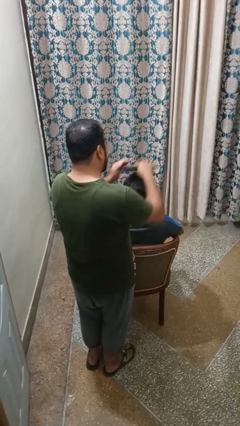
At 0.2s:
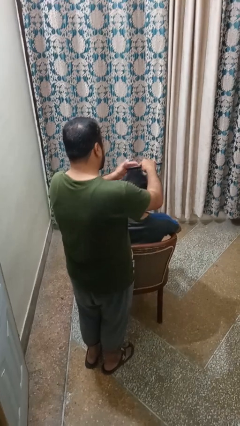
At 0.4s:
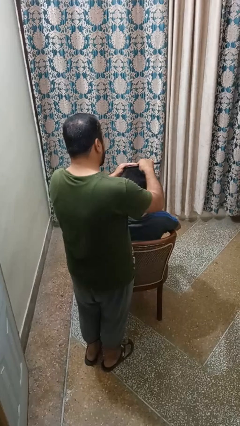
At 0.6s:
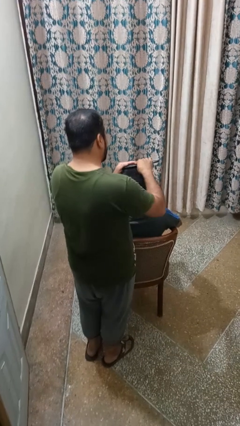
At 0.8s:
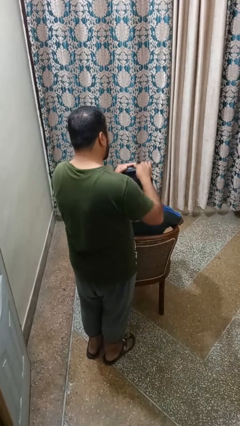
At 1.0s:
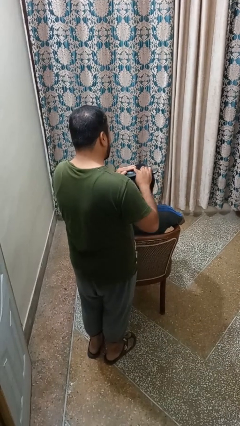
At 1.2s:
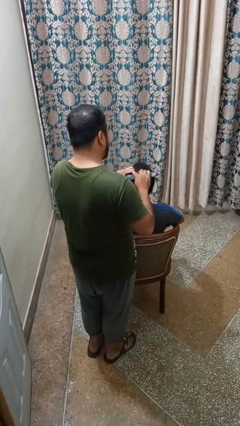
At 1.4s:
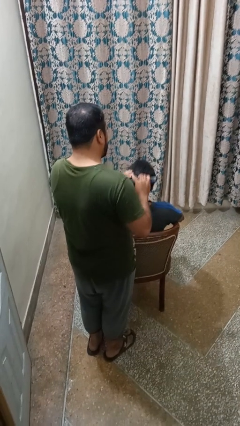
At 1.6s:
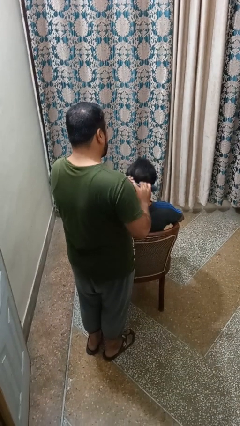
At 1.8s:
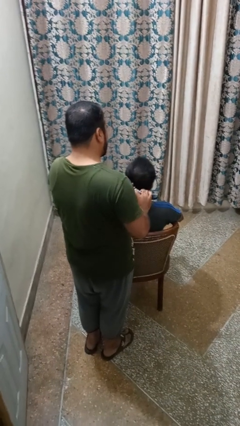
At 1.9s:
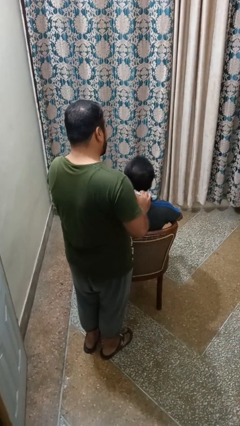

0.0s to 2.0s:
person brushes hair of person

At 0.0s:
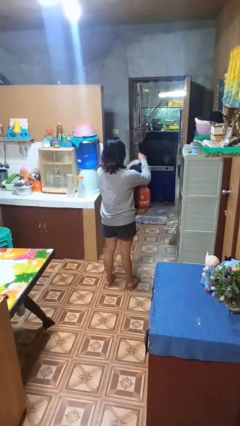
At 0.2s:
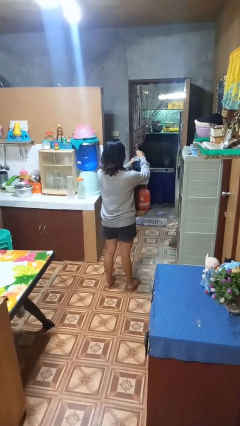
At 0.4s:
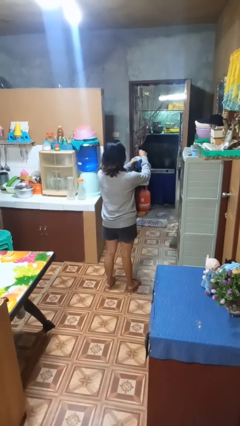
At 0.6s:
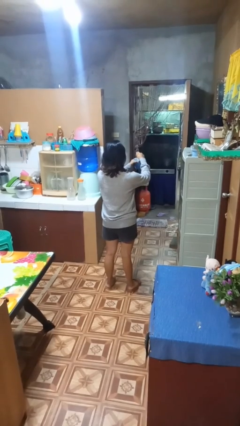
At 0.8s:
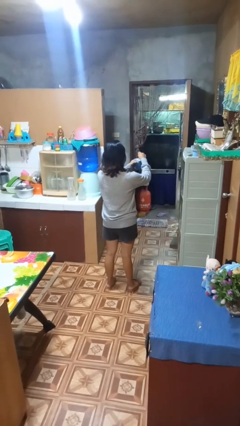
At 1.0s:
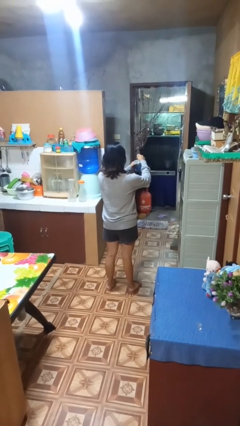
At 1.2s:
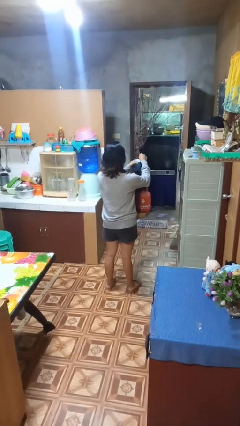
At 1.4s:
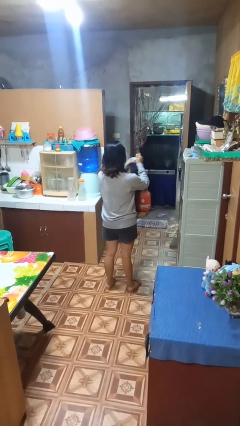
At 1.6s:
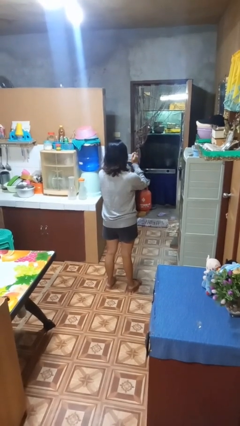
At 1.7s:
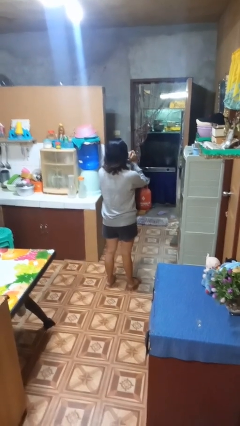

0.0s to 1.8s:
person stirs mug

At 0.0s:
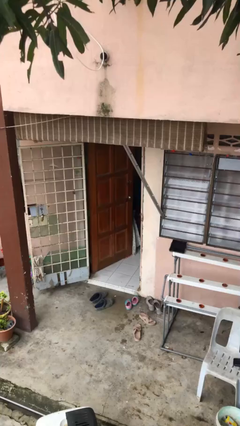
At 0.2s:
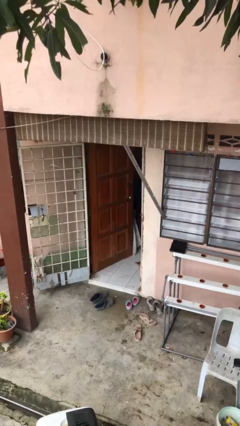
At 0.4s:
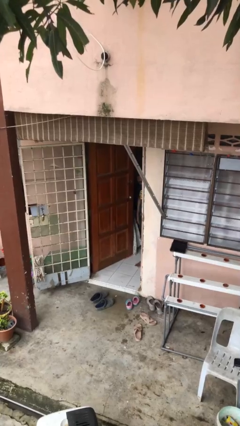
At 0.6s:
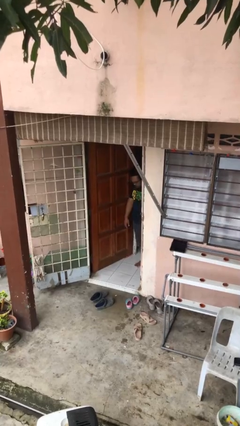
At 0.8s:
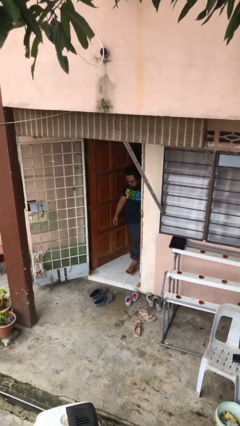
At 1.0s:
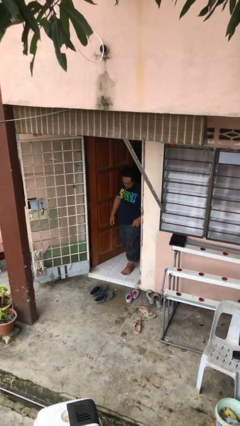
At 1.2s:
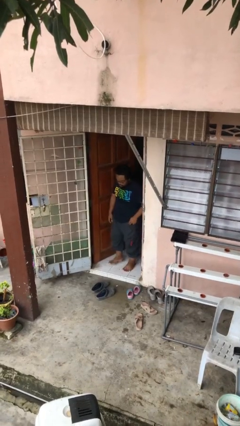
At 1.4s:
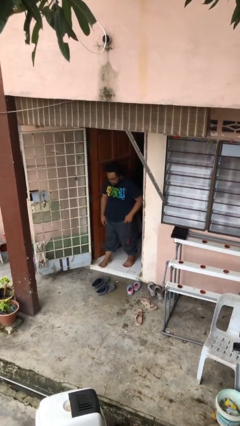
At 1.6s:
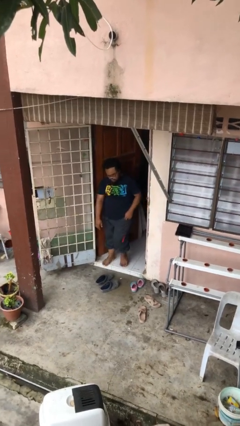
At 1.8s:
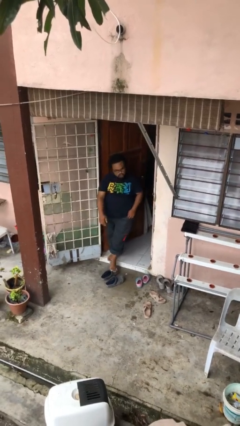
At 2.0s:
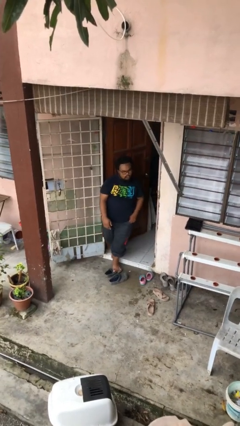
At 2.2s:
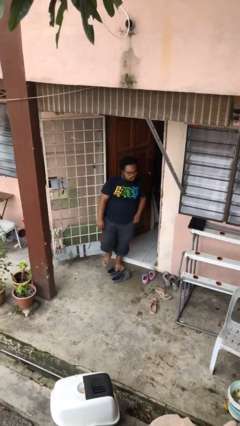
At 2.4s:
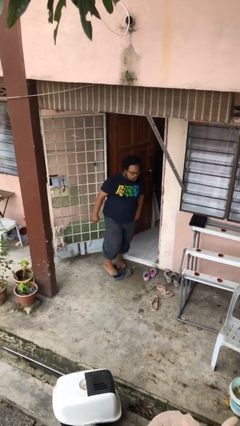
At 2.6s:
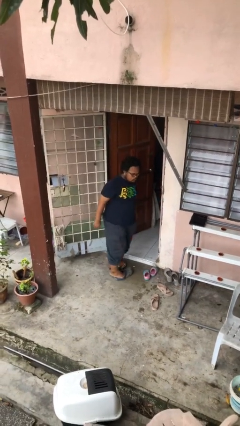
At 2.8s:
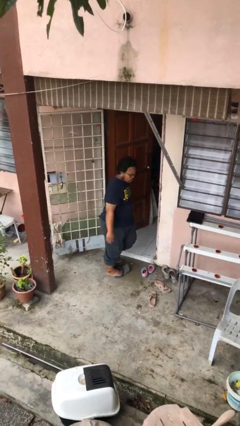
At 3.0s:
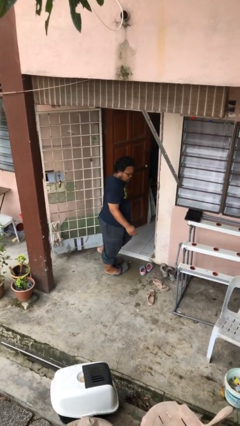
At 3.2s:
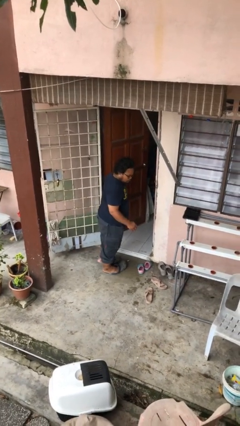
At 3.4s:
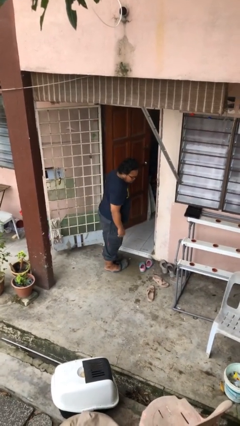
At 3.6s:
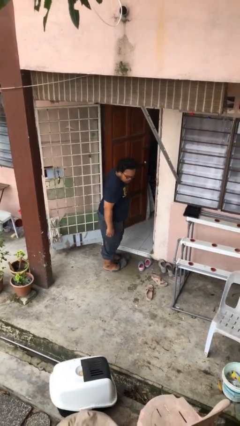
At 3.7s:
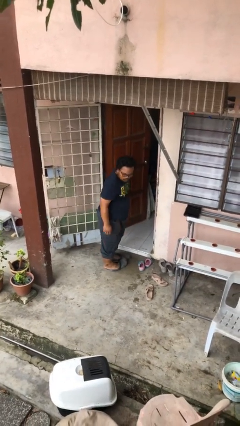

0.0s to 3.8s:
person enters scene through structure

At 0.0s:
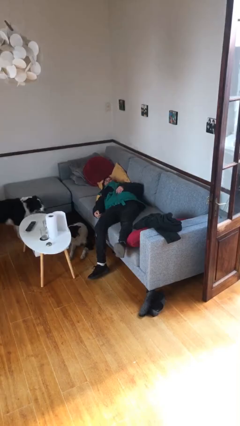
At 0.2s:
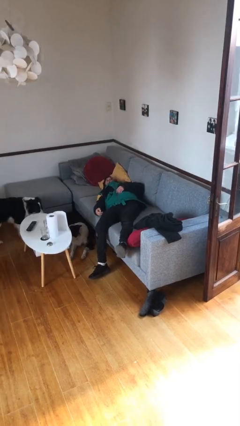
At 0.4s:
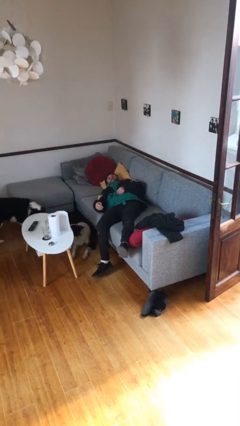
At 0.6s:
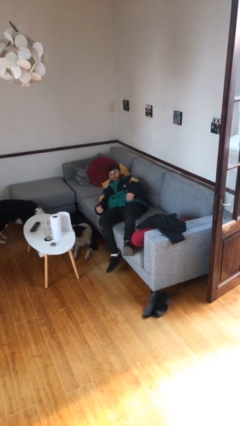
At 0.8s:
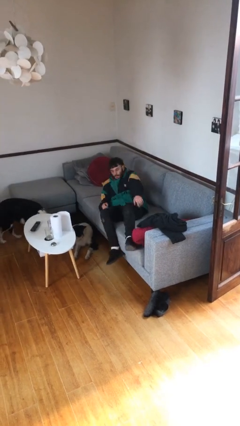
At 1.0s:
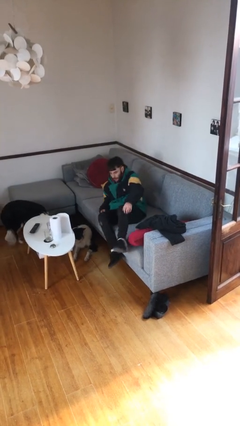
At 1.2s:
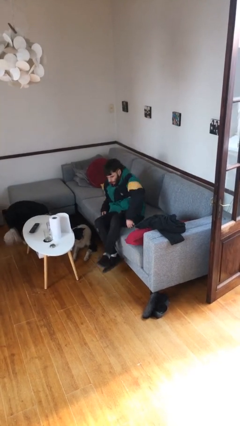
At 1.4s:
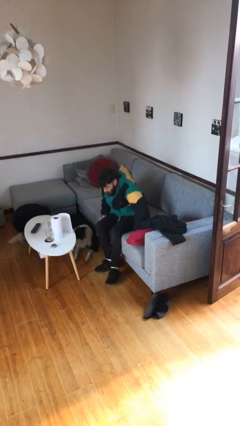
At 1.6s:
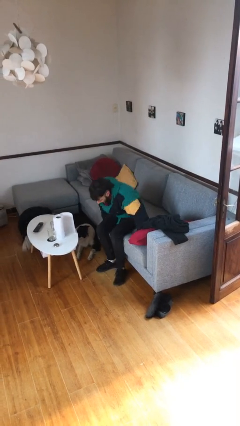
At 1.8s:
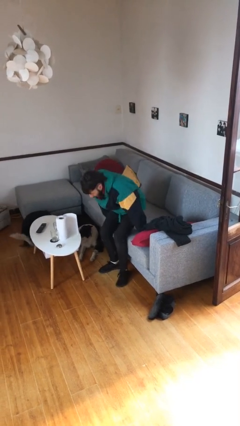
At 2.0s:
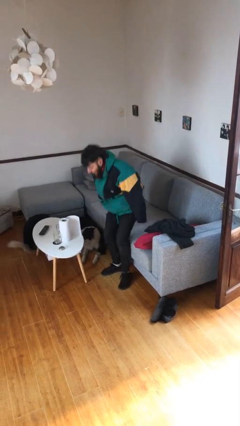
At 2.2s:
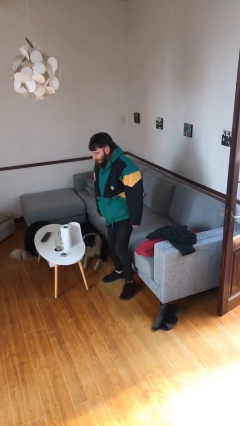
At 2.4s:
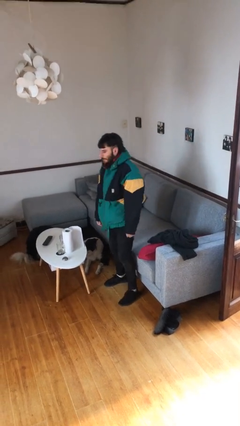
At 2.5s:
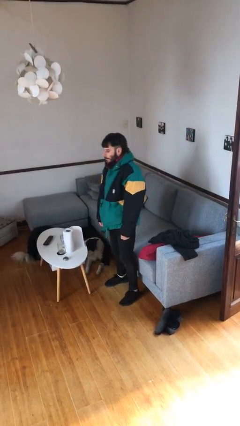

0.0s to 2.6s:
person stands up

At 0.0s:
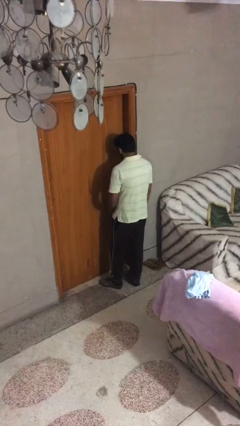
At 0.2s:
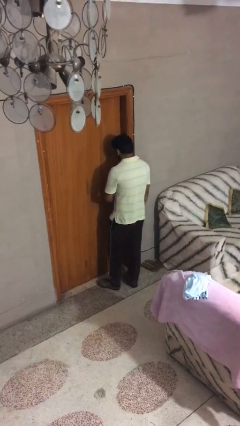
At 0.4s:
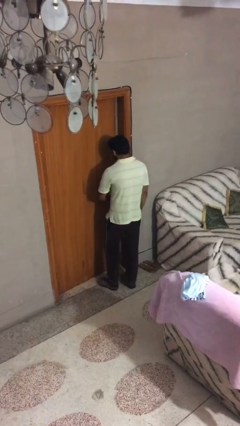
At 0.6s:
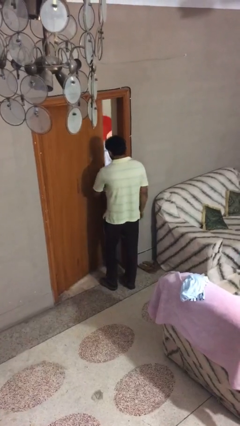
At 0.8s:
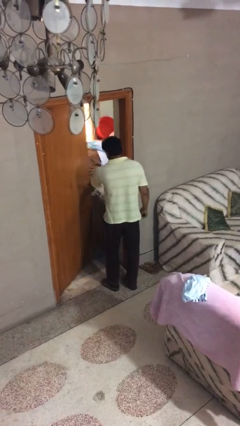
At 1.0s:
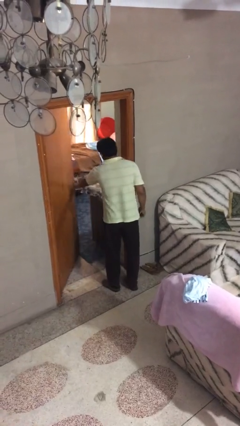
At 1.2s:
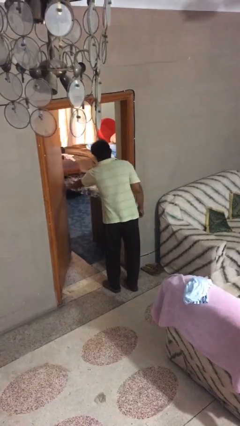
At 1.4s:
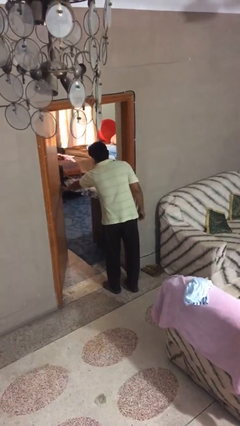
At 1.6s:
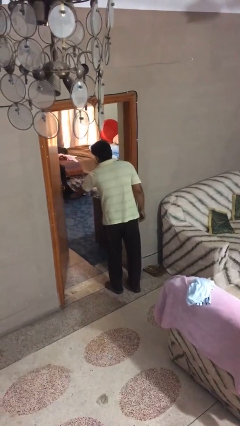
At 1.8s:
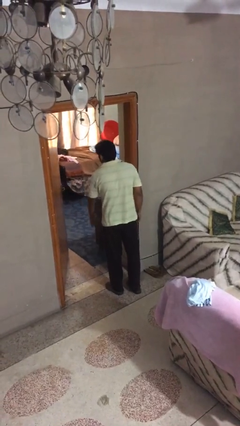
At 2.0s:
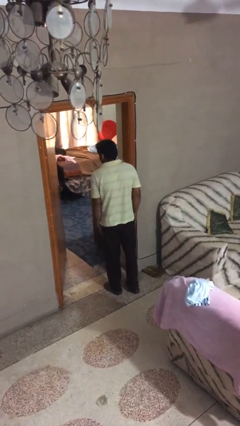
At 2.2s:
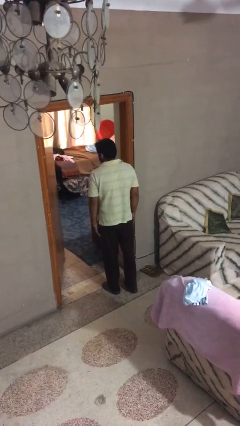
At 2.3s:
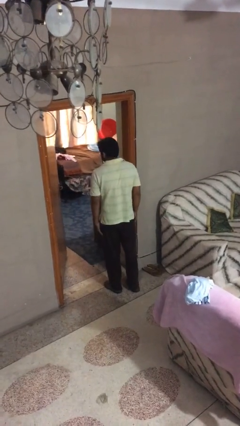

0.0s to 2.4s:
person opens facility door

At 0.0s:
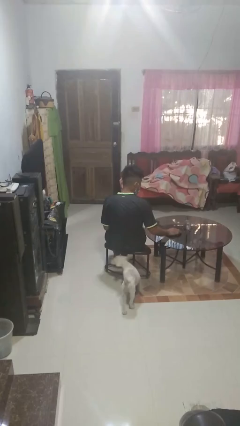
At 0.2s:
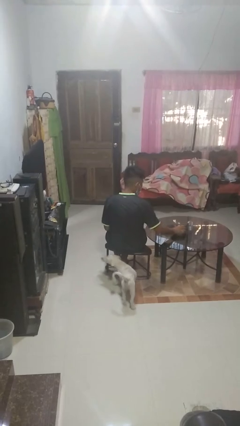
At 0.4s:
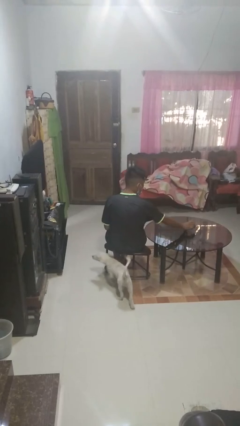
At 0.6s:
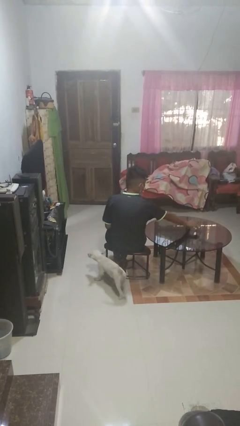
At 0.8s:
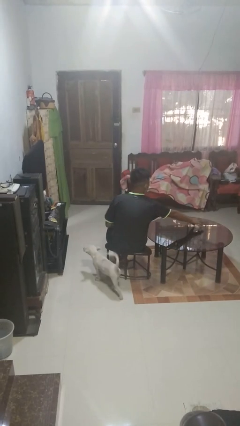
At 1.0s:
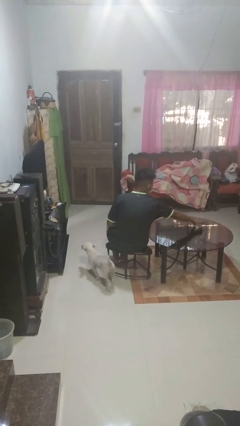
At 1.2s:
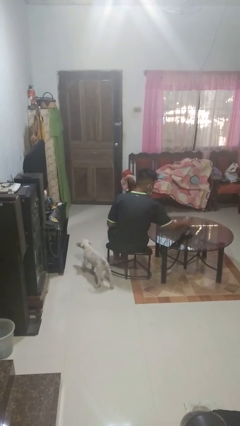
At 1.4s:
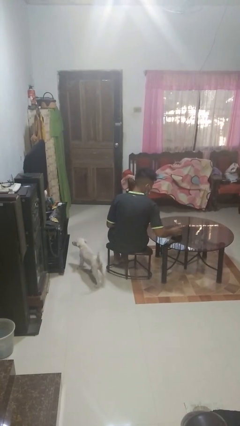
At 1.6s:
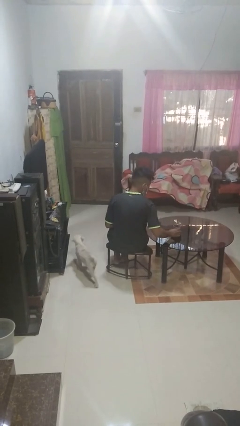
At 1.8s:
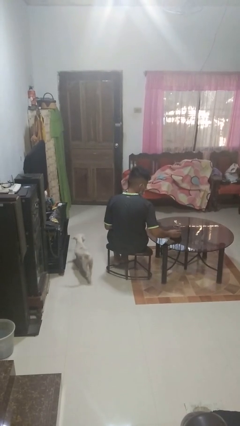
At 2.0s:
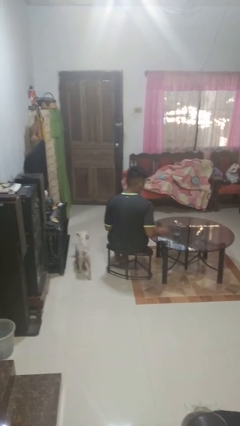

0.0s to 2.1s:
person sets upright glass

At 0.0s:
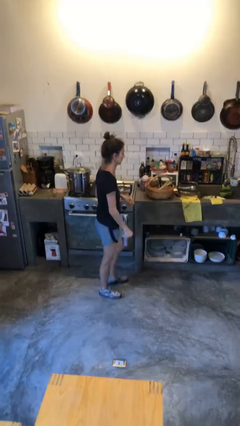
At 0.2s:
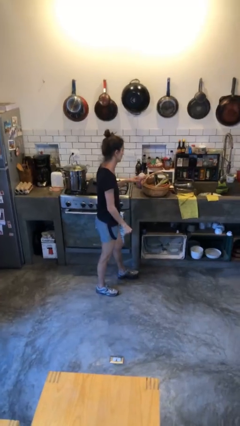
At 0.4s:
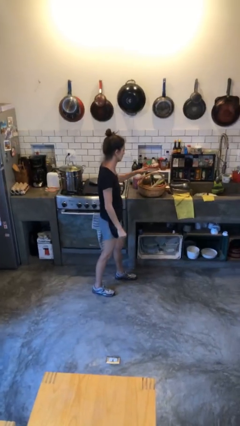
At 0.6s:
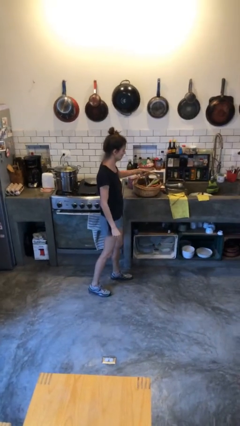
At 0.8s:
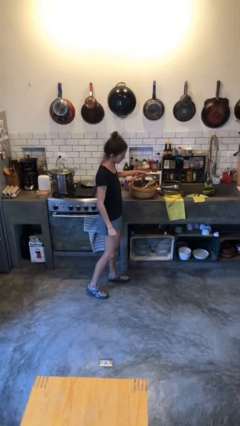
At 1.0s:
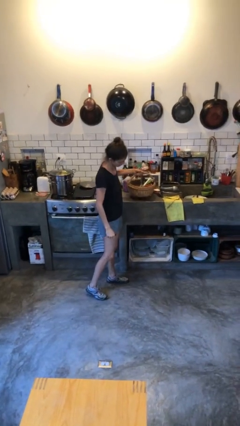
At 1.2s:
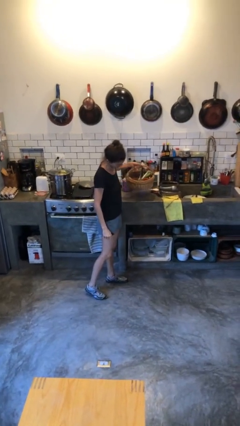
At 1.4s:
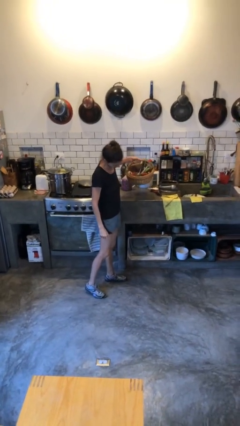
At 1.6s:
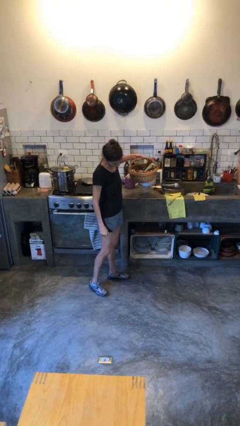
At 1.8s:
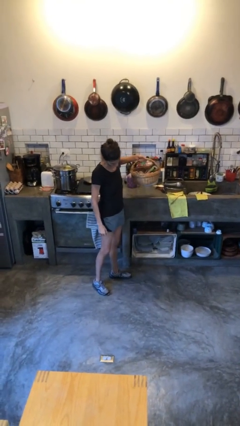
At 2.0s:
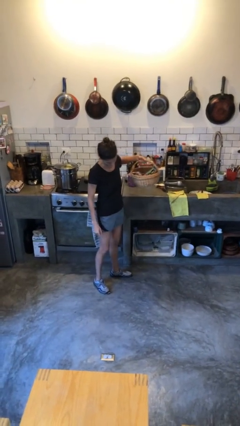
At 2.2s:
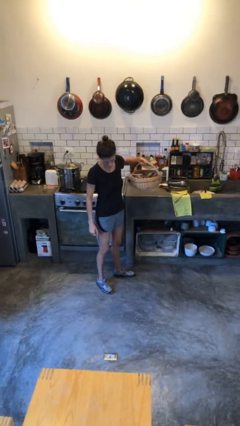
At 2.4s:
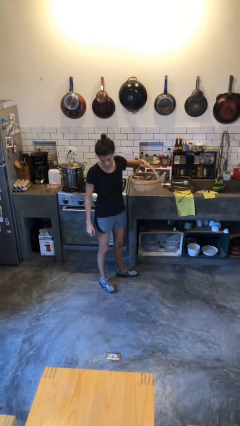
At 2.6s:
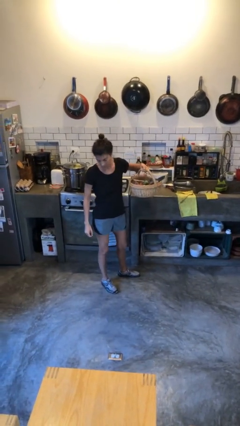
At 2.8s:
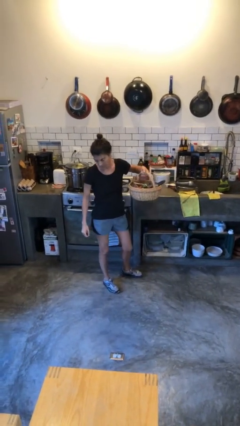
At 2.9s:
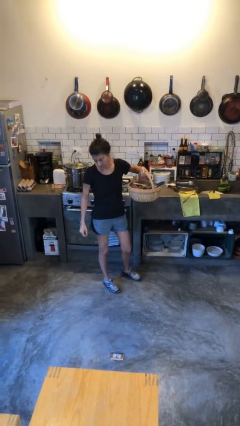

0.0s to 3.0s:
person picks up object from countertop
